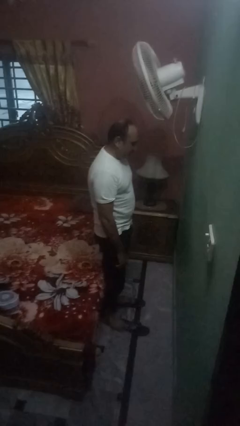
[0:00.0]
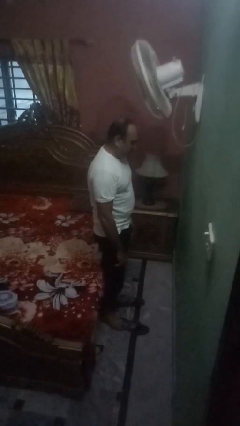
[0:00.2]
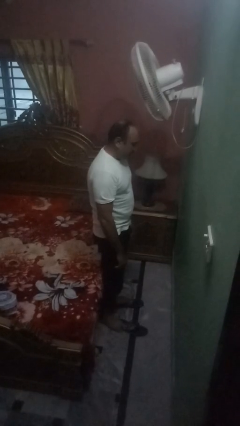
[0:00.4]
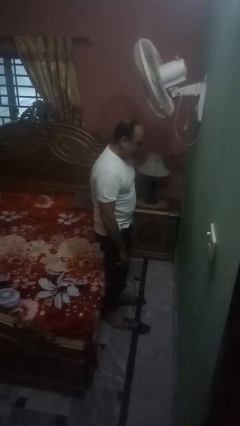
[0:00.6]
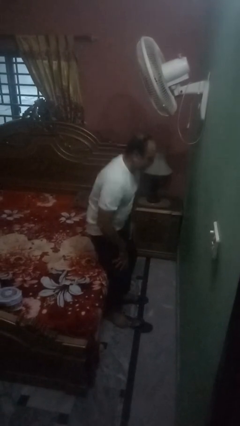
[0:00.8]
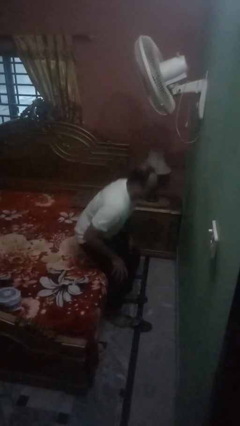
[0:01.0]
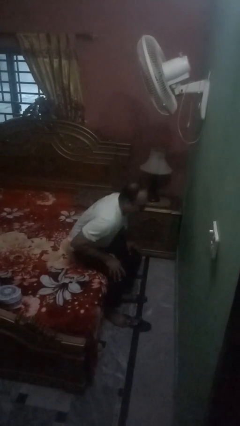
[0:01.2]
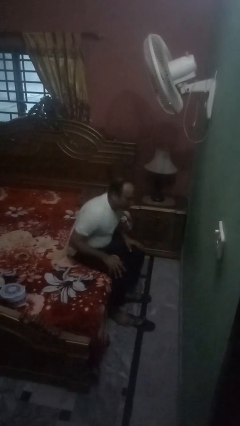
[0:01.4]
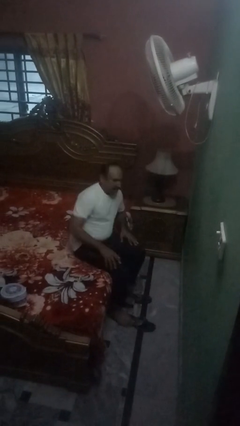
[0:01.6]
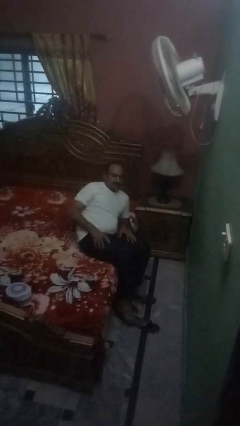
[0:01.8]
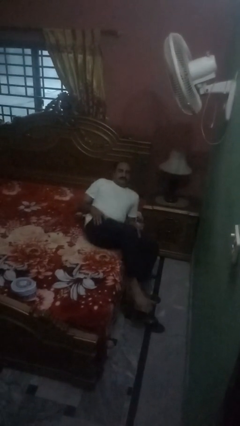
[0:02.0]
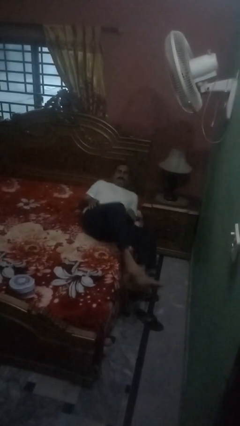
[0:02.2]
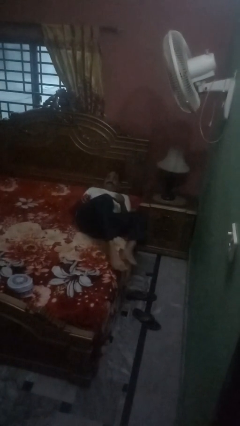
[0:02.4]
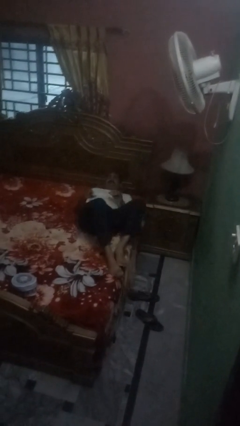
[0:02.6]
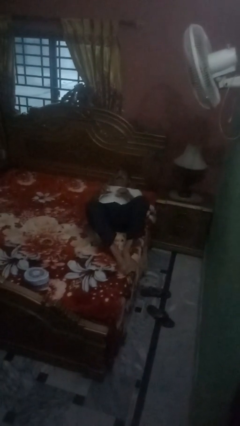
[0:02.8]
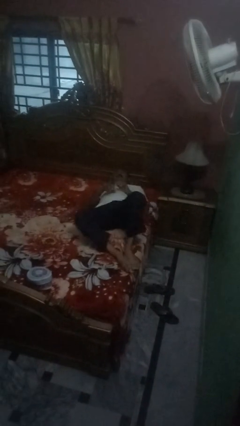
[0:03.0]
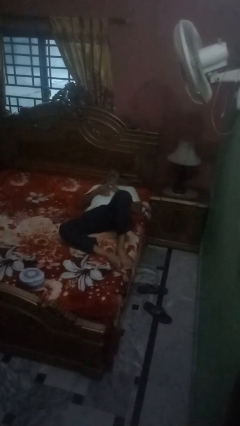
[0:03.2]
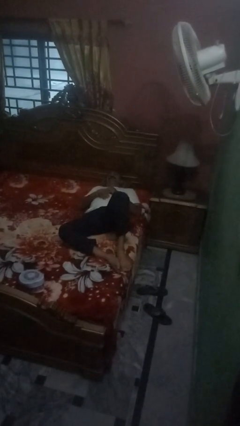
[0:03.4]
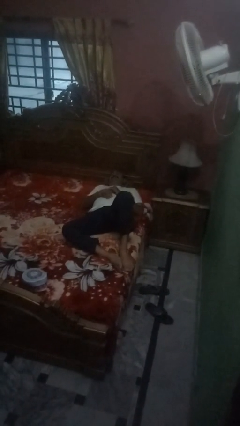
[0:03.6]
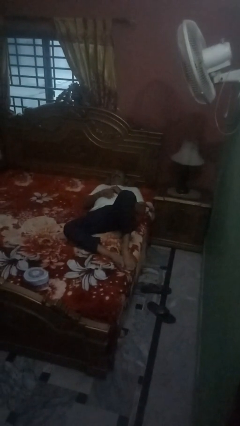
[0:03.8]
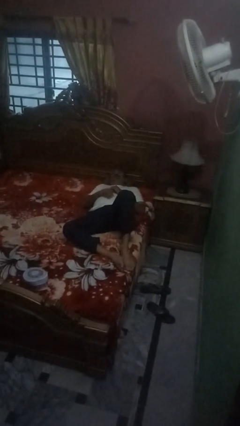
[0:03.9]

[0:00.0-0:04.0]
person lies down on bed

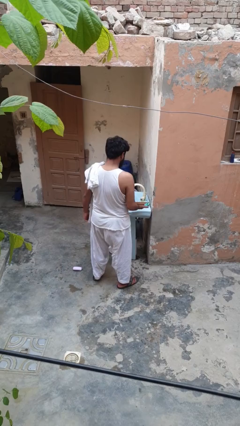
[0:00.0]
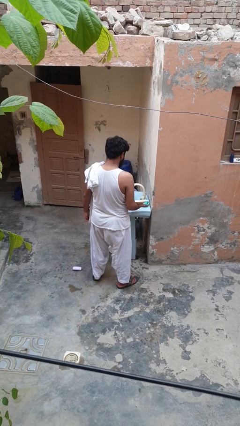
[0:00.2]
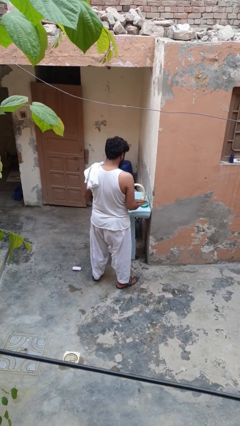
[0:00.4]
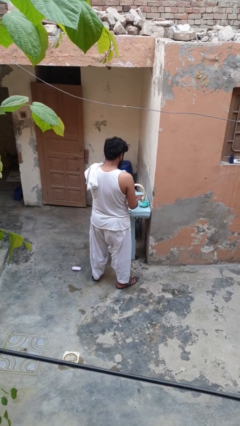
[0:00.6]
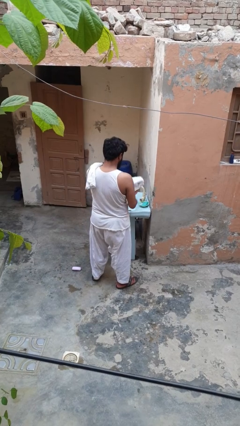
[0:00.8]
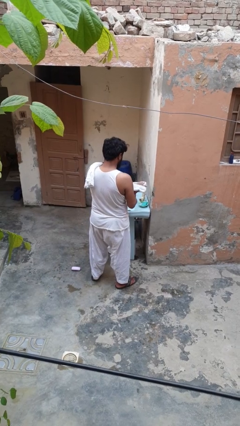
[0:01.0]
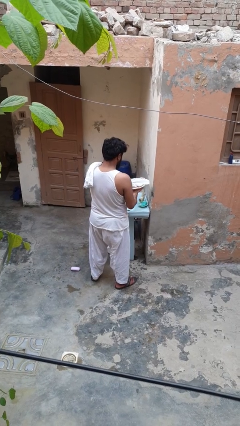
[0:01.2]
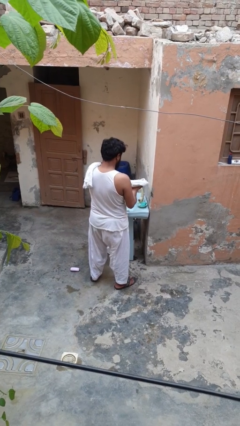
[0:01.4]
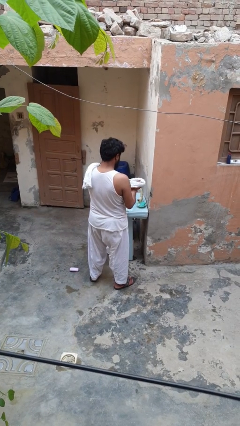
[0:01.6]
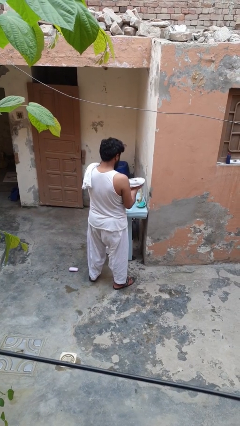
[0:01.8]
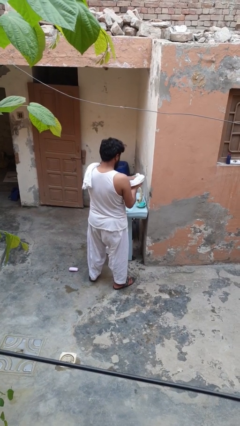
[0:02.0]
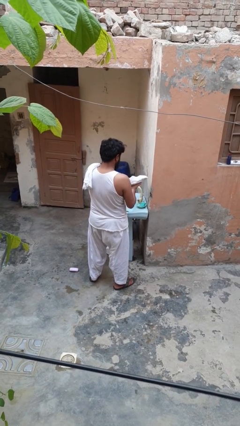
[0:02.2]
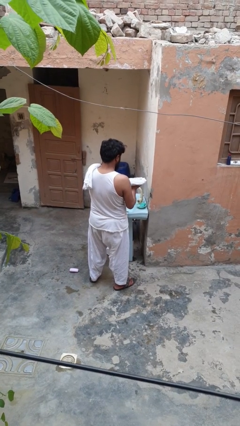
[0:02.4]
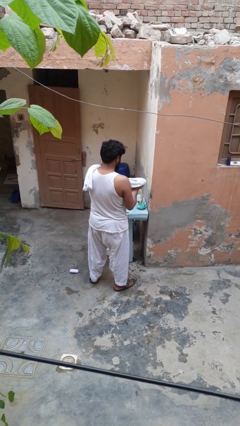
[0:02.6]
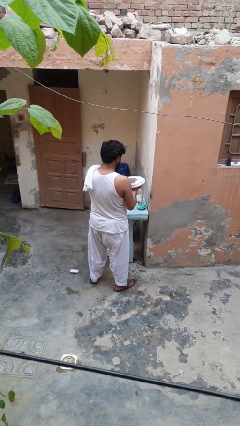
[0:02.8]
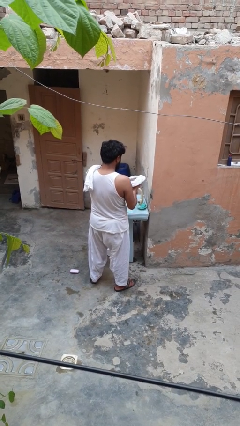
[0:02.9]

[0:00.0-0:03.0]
person dries dish

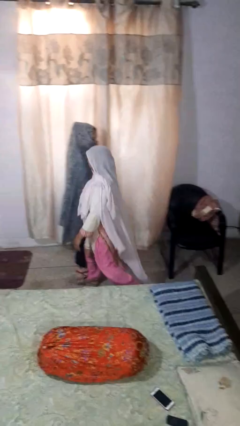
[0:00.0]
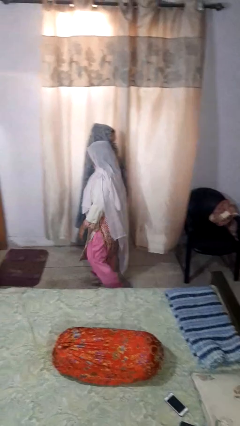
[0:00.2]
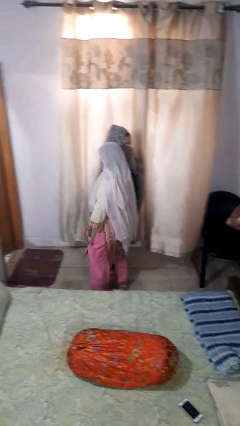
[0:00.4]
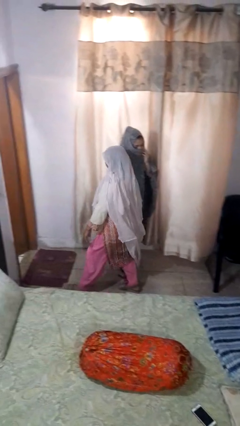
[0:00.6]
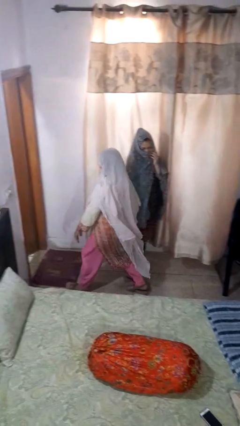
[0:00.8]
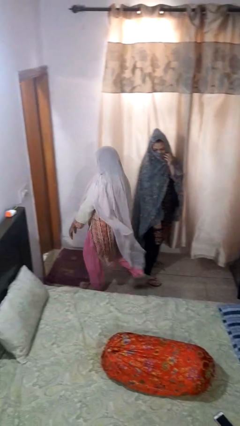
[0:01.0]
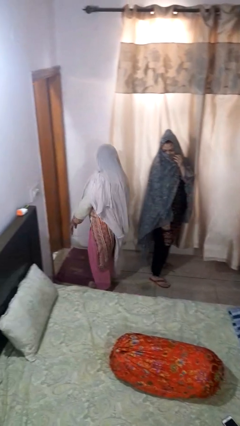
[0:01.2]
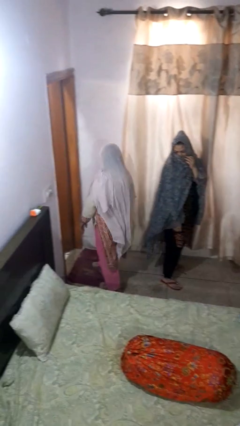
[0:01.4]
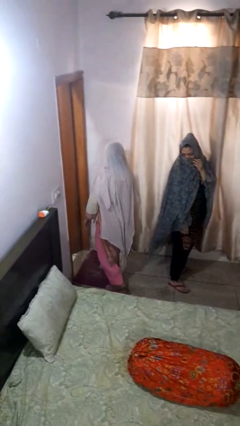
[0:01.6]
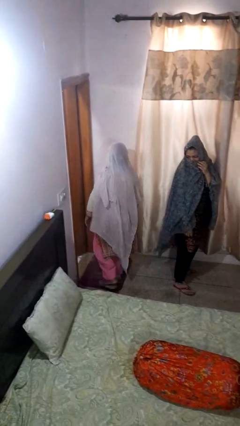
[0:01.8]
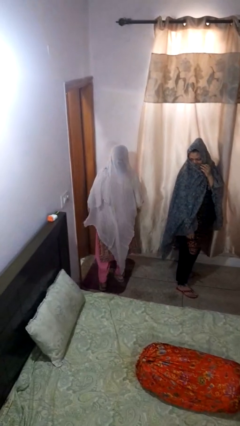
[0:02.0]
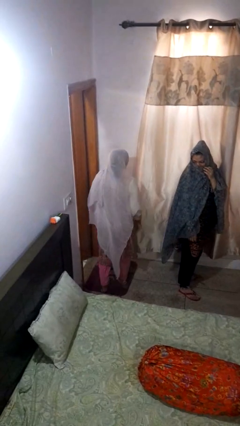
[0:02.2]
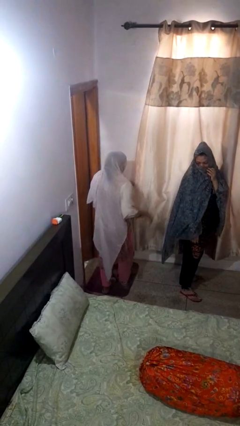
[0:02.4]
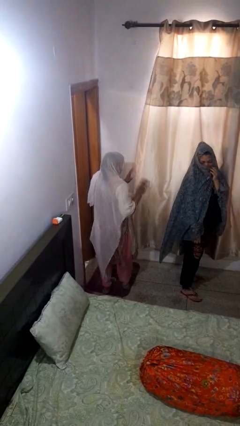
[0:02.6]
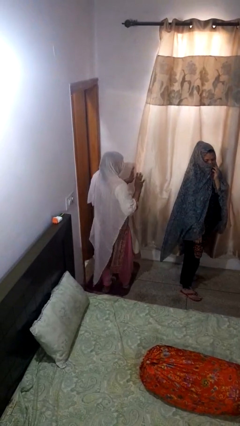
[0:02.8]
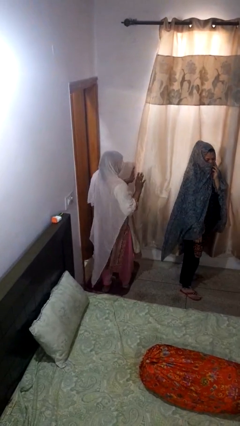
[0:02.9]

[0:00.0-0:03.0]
person bumps into person

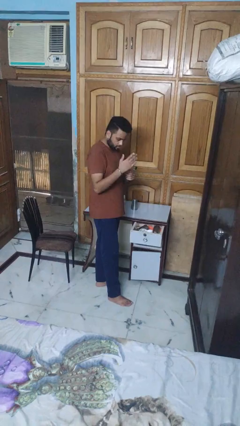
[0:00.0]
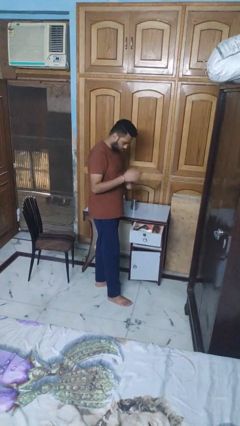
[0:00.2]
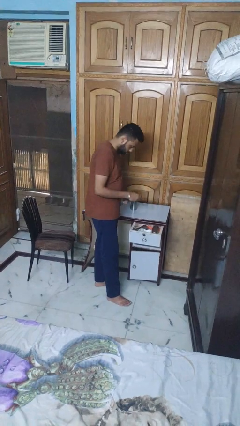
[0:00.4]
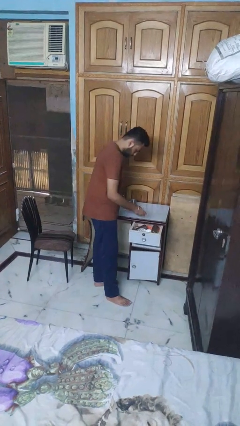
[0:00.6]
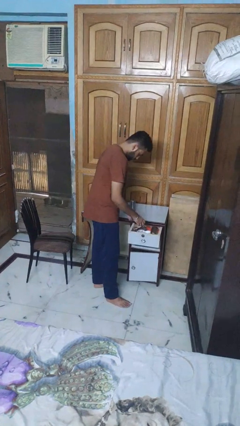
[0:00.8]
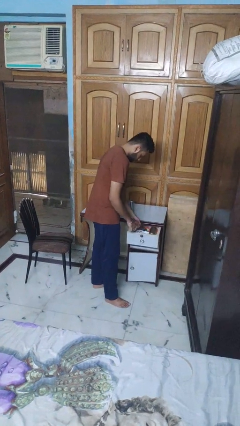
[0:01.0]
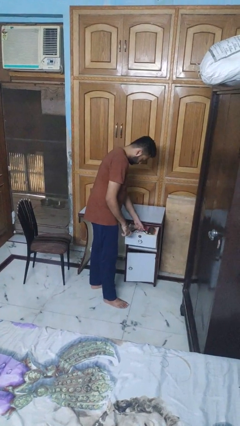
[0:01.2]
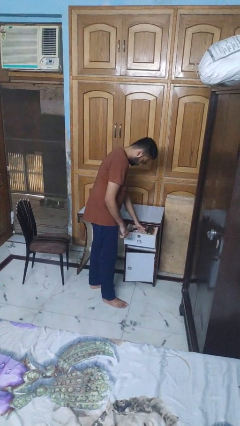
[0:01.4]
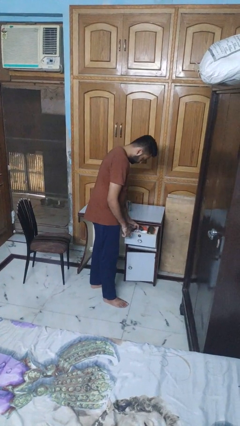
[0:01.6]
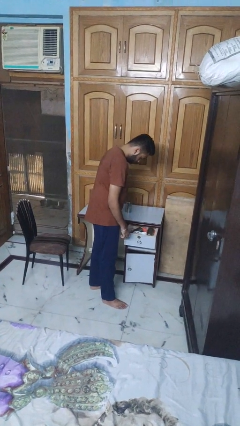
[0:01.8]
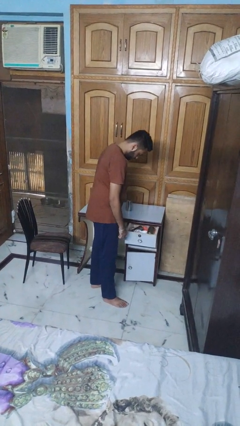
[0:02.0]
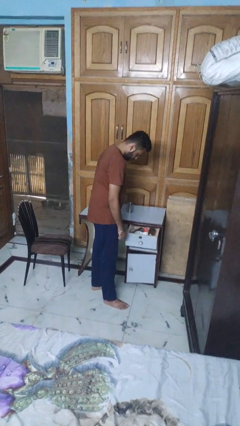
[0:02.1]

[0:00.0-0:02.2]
person puts object into kitchen drawer

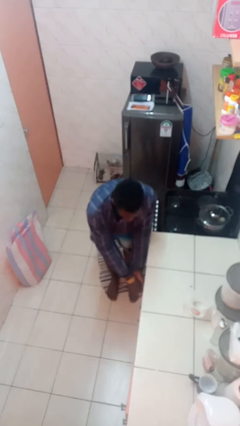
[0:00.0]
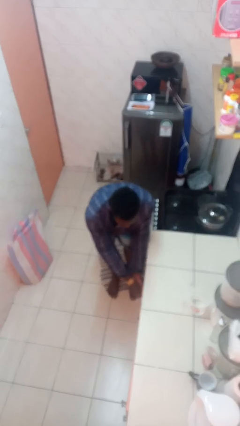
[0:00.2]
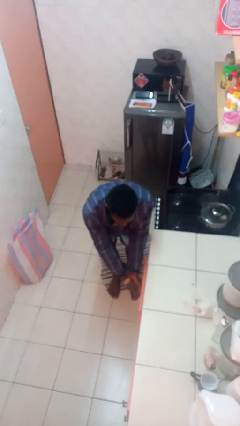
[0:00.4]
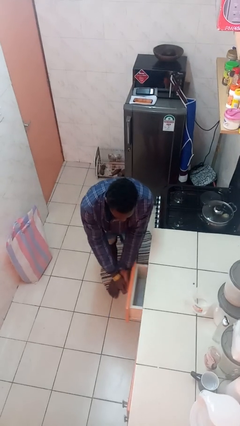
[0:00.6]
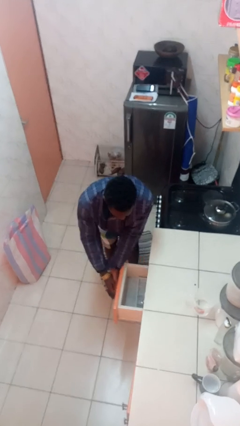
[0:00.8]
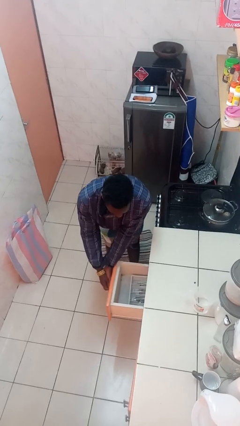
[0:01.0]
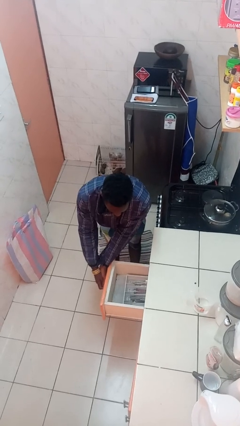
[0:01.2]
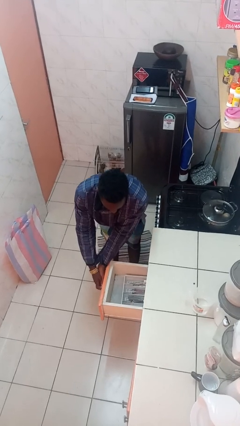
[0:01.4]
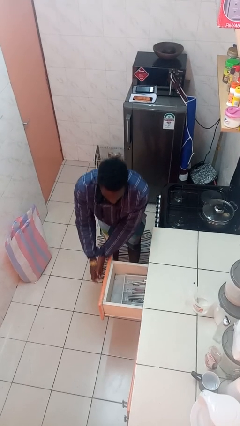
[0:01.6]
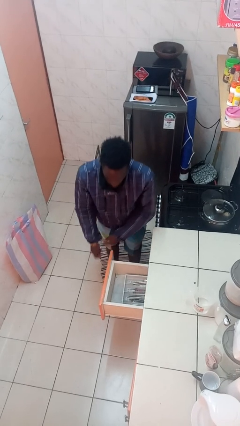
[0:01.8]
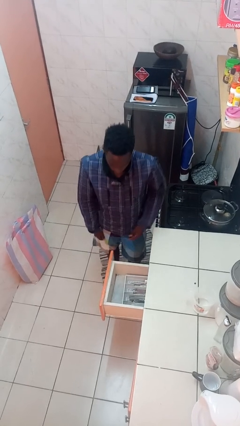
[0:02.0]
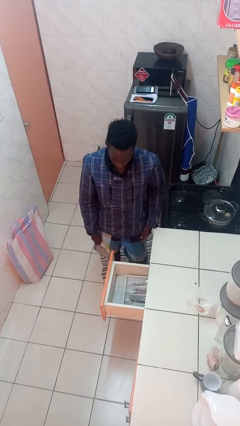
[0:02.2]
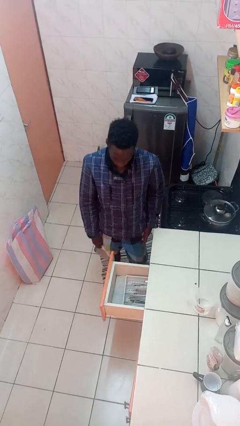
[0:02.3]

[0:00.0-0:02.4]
person opens kitchen drawer

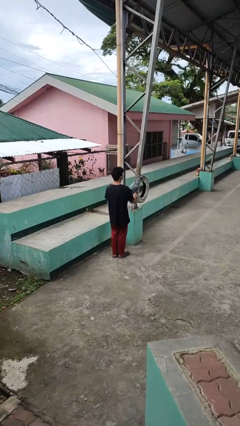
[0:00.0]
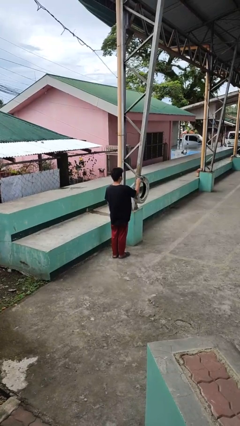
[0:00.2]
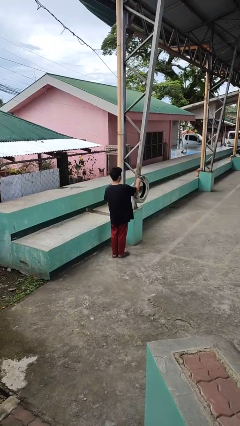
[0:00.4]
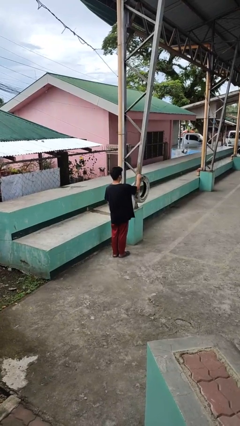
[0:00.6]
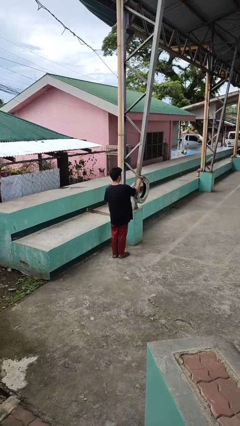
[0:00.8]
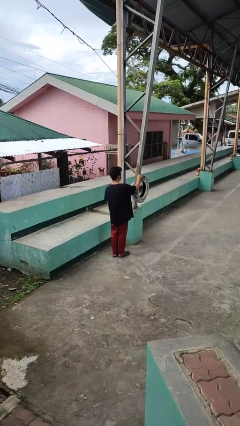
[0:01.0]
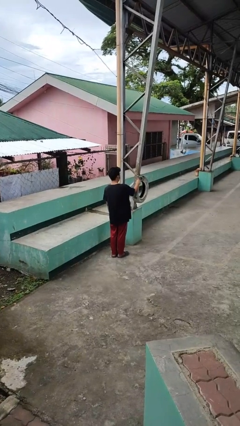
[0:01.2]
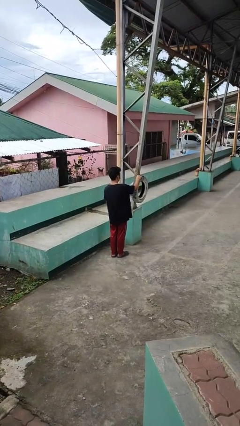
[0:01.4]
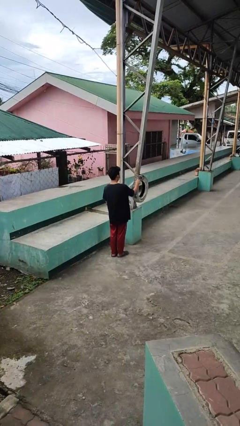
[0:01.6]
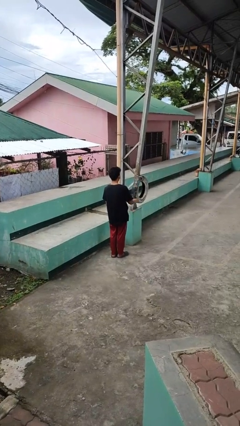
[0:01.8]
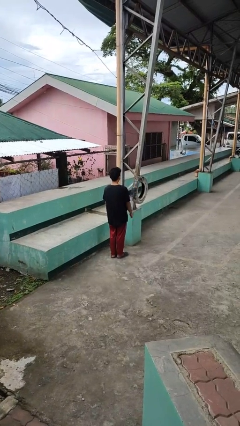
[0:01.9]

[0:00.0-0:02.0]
person taps object with finger

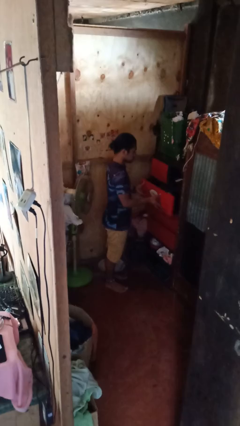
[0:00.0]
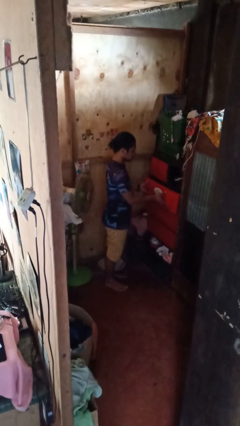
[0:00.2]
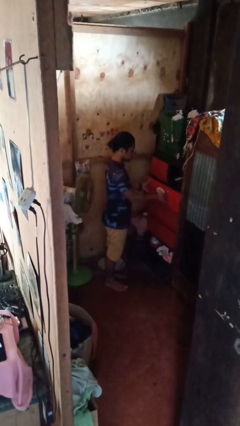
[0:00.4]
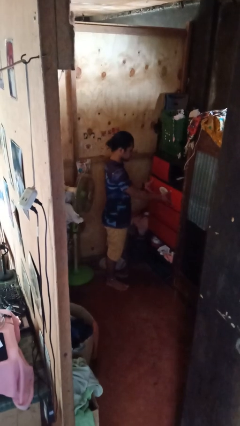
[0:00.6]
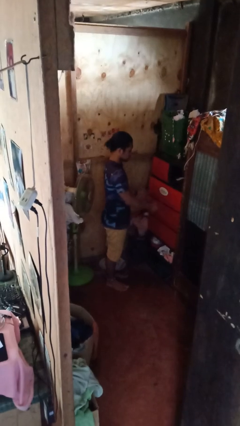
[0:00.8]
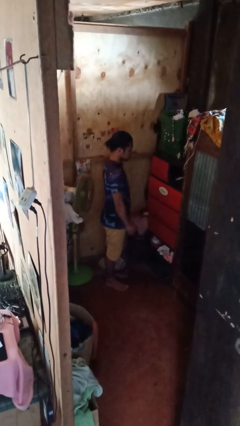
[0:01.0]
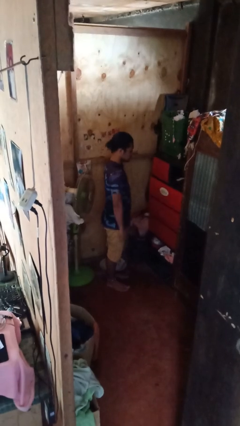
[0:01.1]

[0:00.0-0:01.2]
person closes dresser drawer
